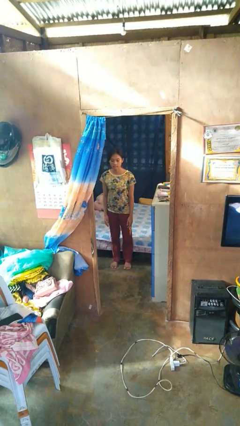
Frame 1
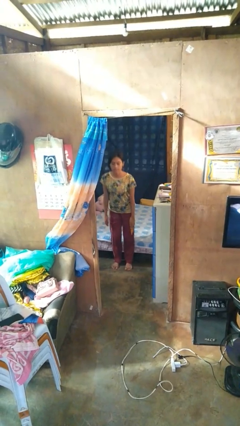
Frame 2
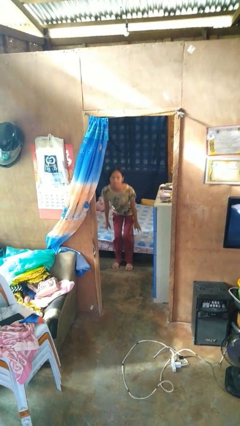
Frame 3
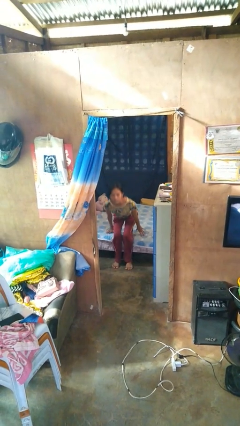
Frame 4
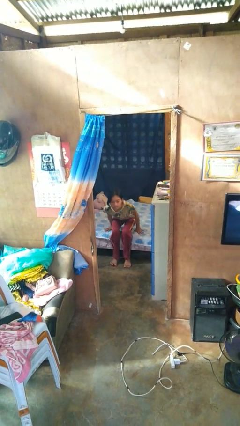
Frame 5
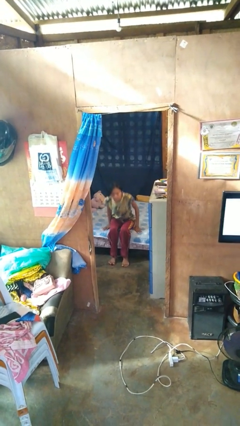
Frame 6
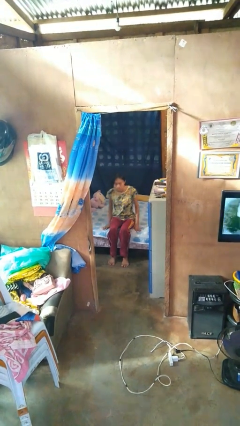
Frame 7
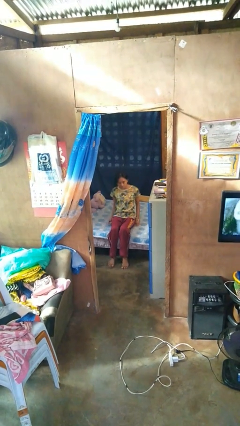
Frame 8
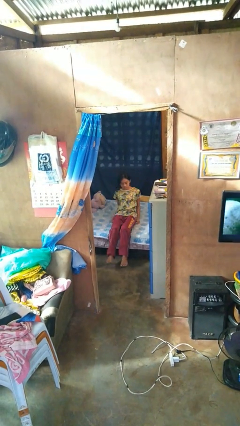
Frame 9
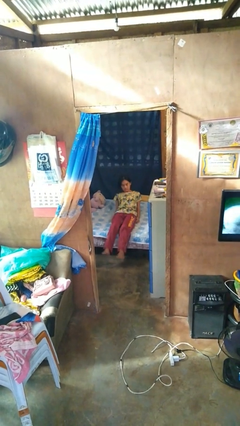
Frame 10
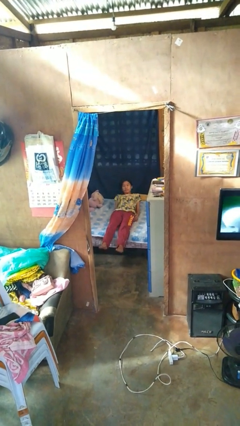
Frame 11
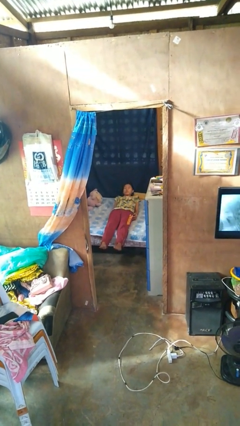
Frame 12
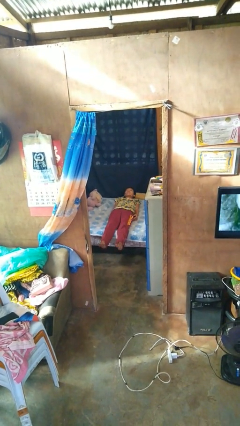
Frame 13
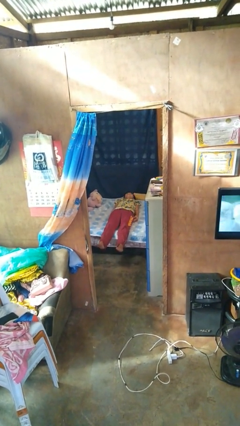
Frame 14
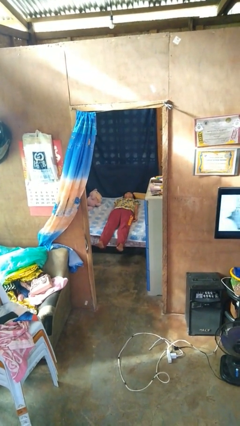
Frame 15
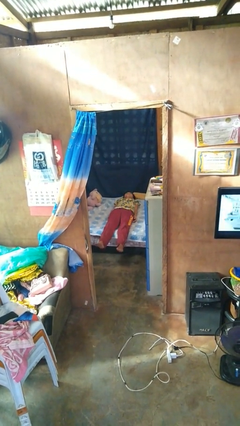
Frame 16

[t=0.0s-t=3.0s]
person lies down on bed

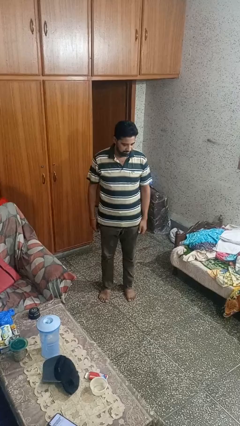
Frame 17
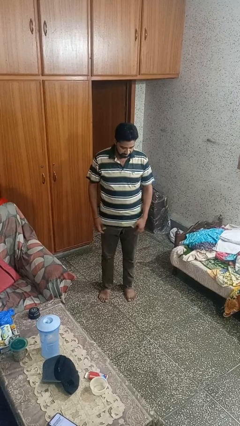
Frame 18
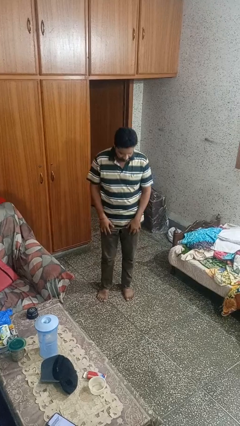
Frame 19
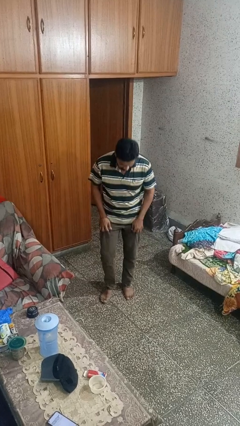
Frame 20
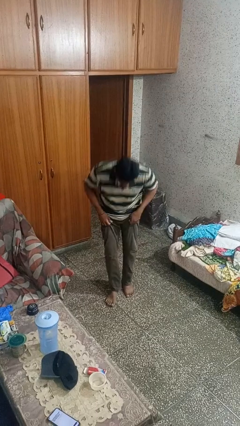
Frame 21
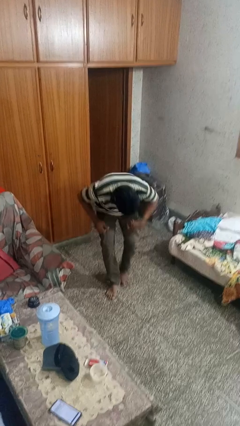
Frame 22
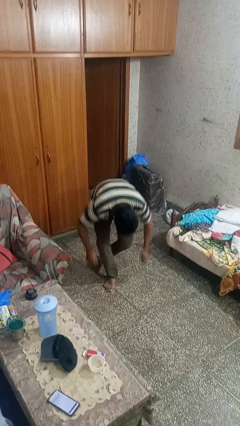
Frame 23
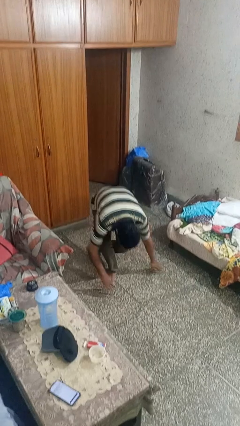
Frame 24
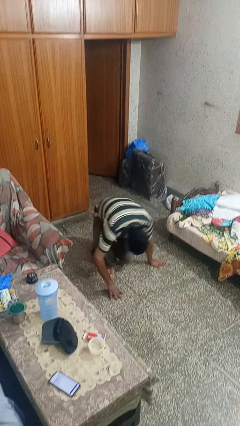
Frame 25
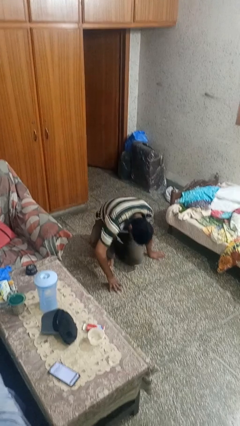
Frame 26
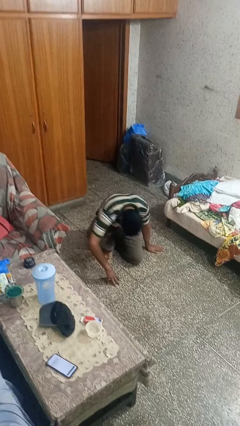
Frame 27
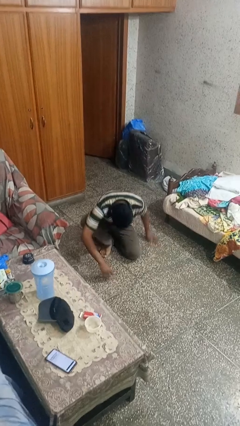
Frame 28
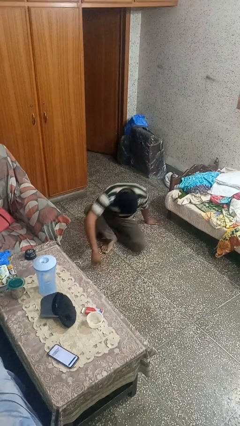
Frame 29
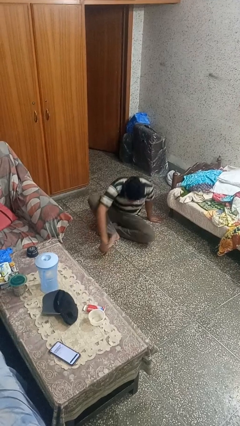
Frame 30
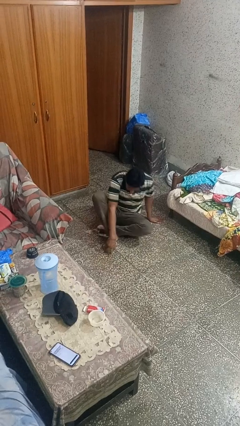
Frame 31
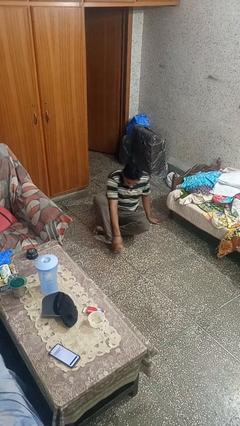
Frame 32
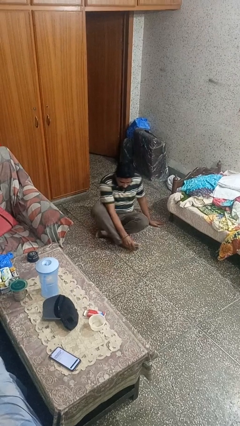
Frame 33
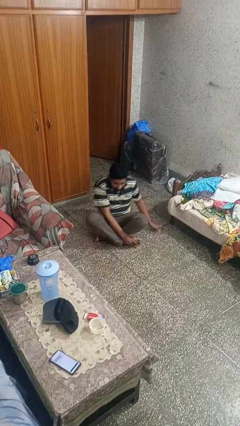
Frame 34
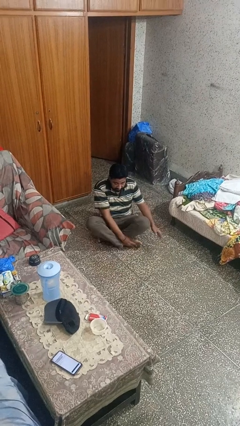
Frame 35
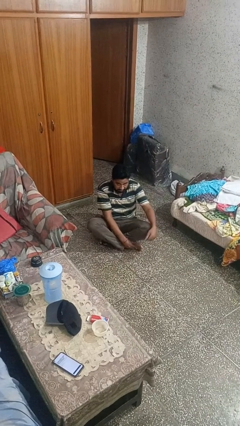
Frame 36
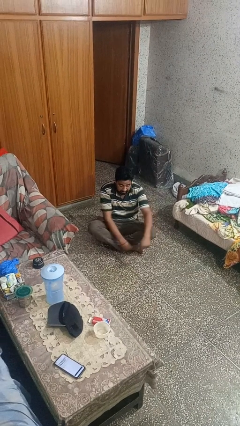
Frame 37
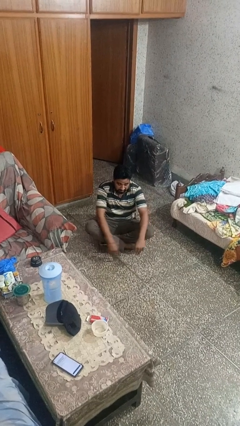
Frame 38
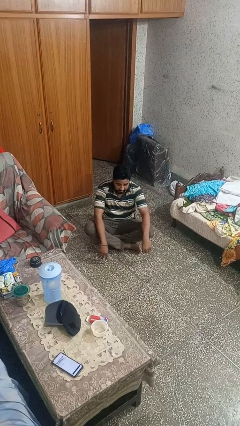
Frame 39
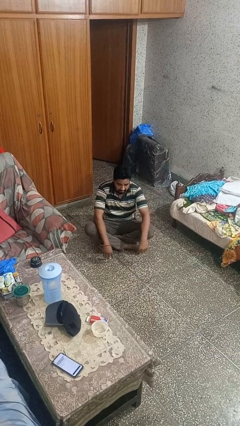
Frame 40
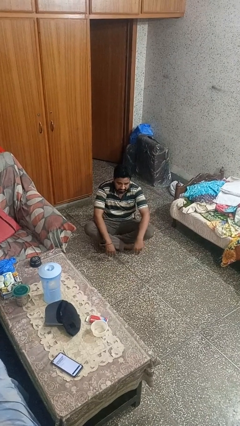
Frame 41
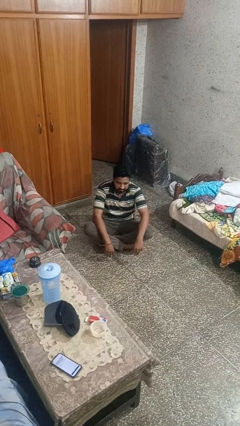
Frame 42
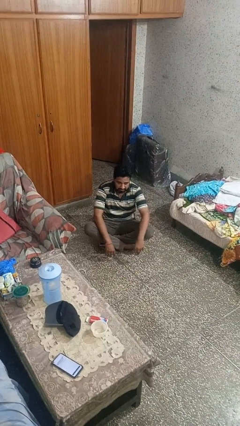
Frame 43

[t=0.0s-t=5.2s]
person sits crisscross

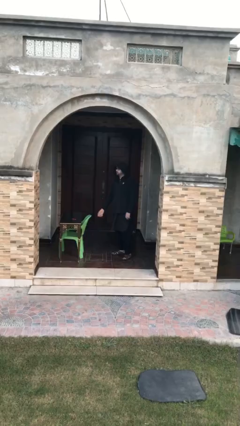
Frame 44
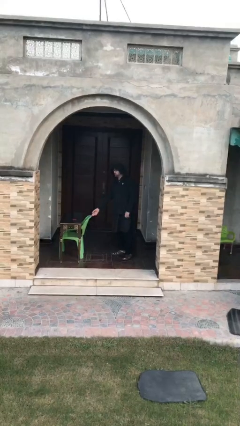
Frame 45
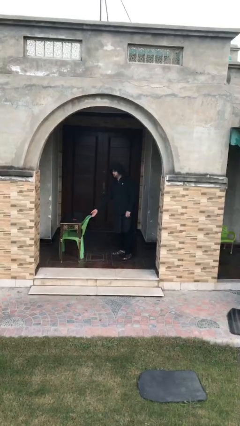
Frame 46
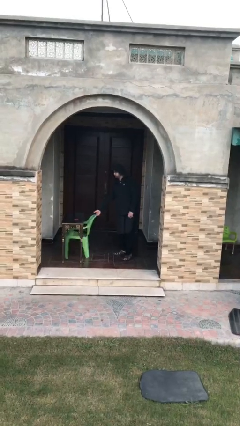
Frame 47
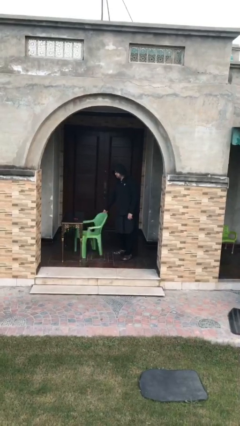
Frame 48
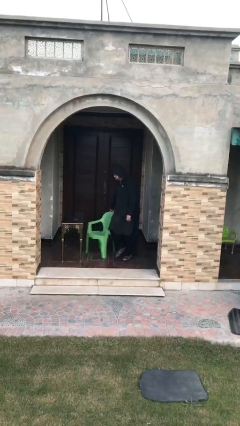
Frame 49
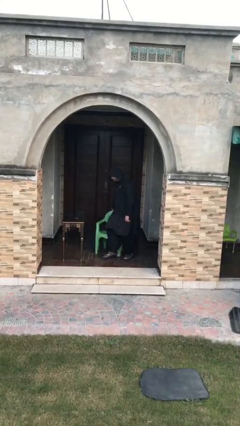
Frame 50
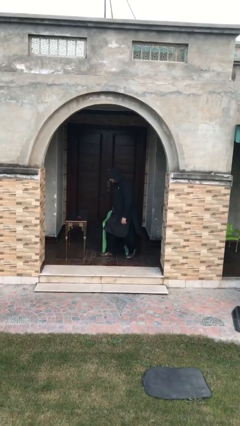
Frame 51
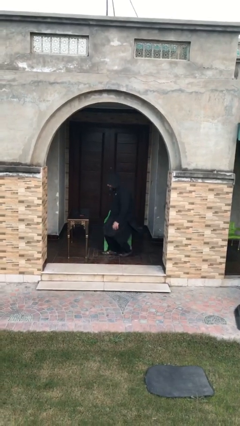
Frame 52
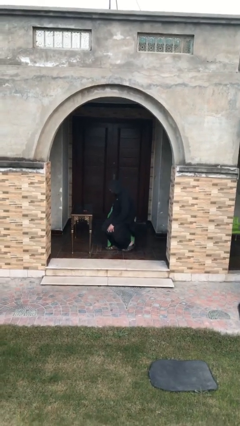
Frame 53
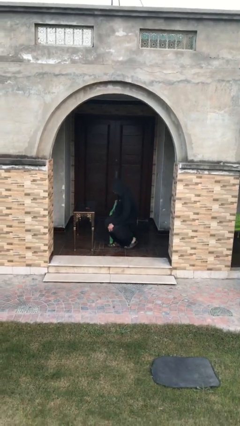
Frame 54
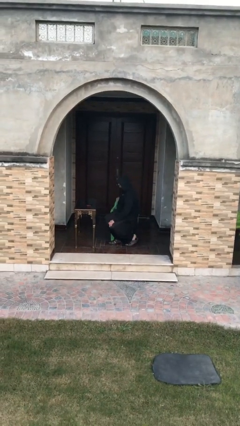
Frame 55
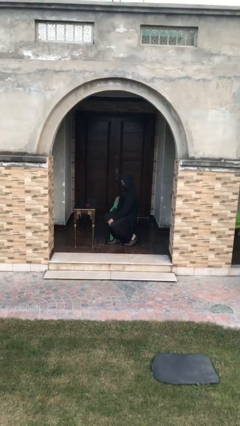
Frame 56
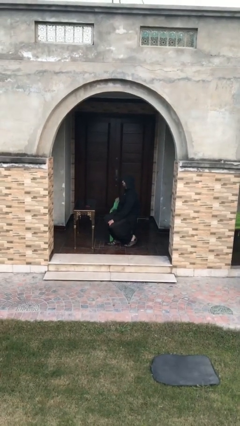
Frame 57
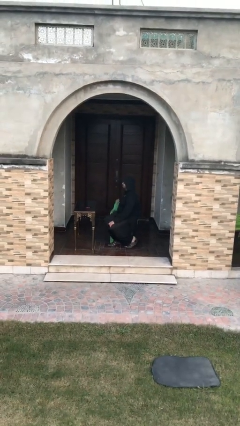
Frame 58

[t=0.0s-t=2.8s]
person sits down

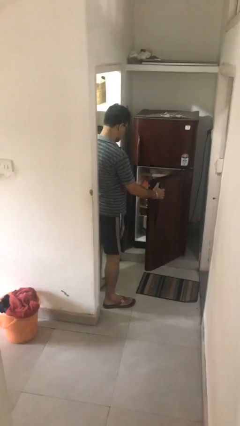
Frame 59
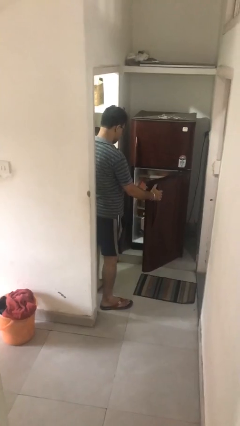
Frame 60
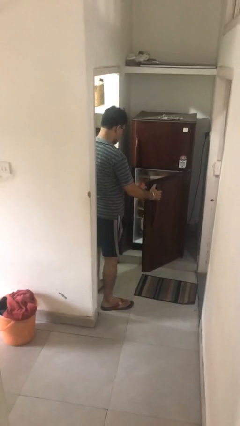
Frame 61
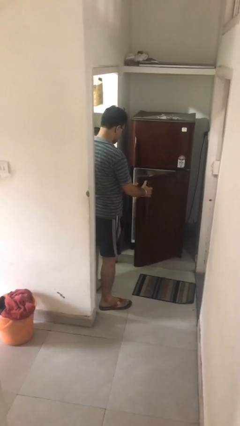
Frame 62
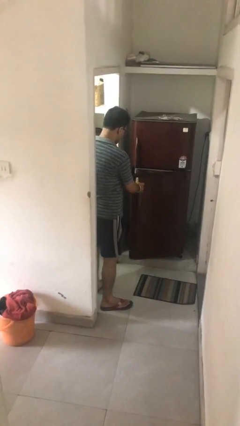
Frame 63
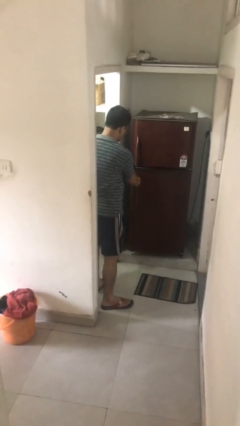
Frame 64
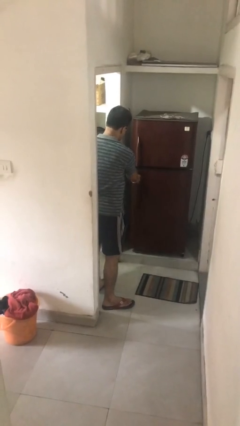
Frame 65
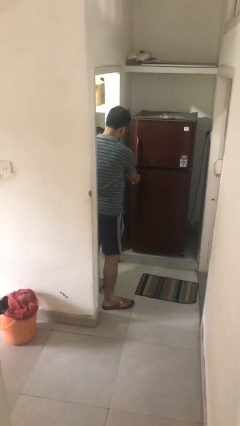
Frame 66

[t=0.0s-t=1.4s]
person closes refrigerator

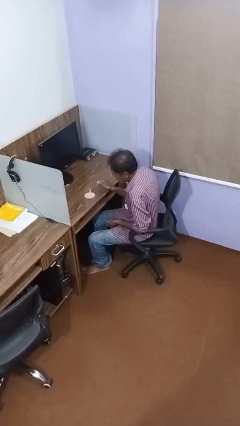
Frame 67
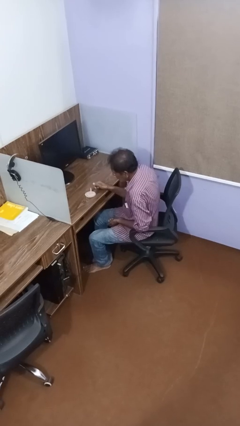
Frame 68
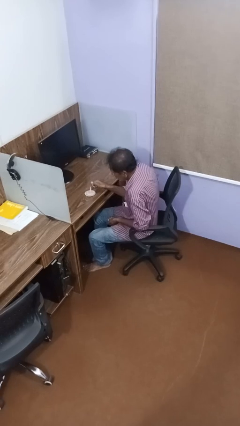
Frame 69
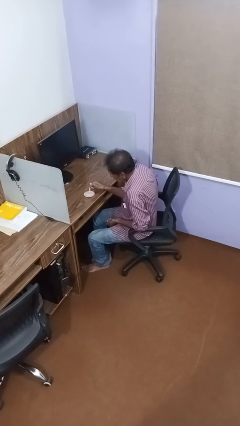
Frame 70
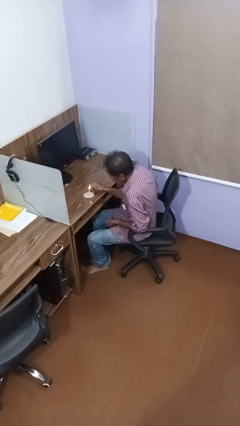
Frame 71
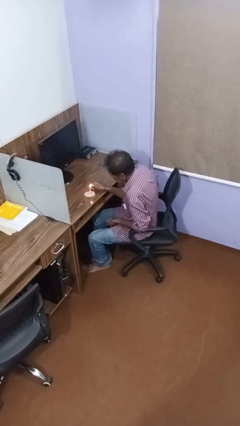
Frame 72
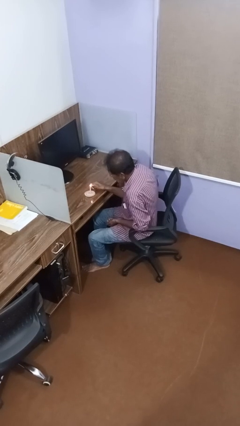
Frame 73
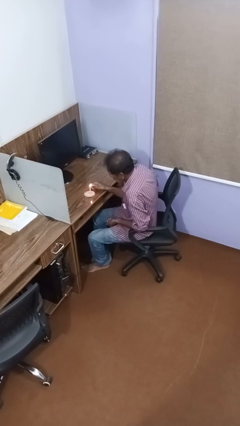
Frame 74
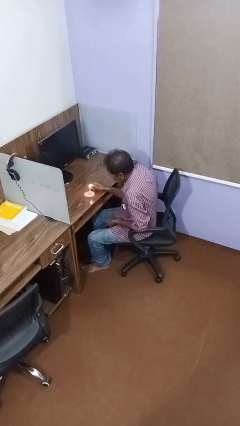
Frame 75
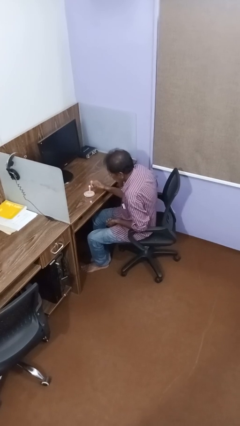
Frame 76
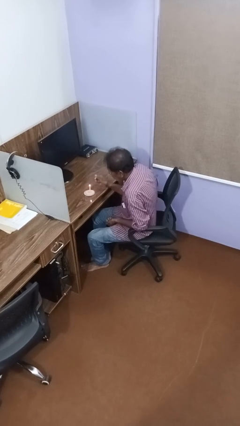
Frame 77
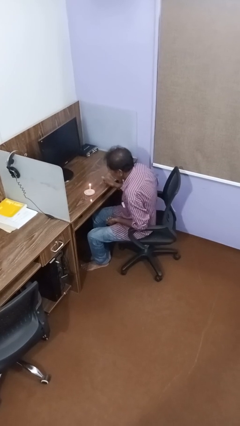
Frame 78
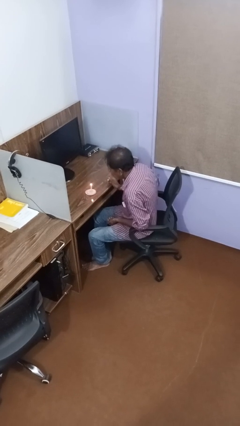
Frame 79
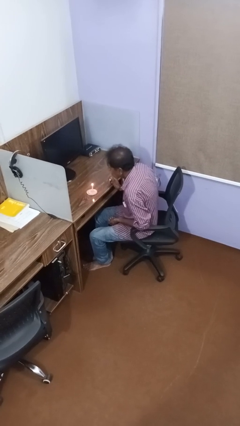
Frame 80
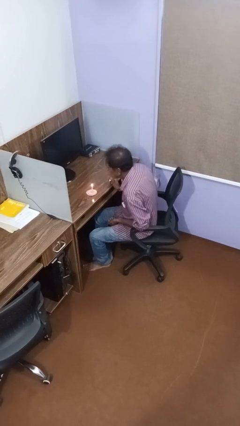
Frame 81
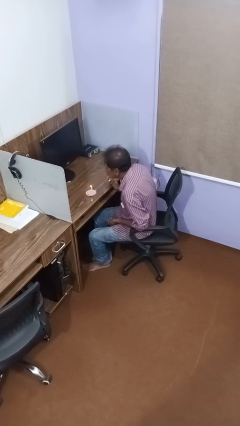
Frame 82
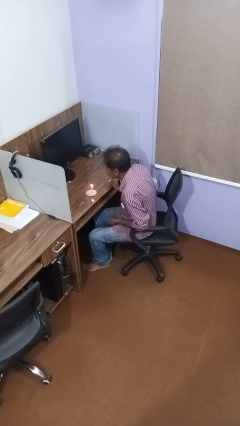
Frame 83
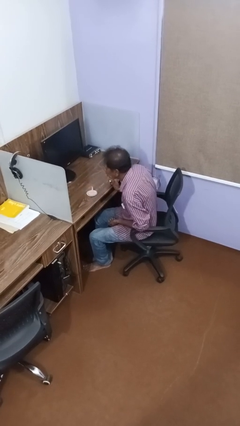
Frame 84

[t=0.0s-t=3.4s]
person lights candle

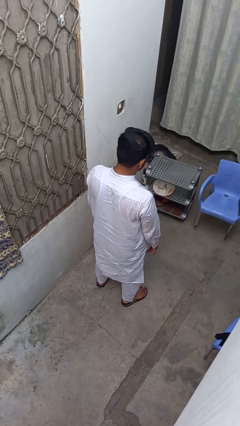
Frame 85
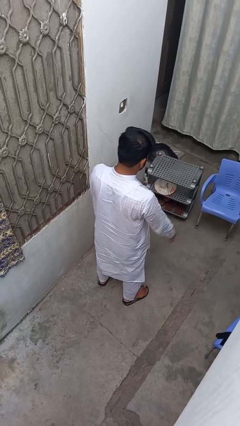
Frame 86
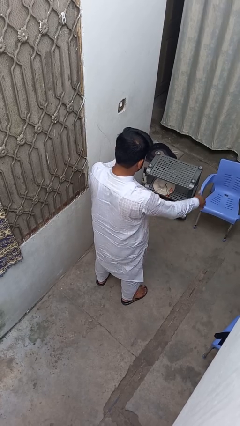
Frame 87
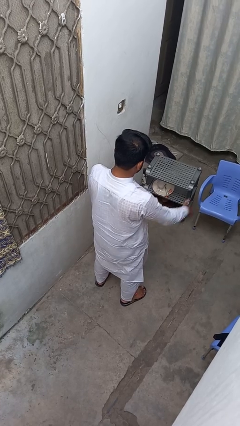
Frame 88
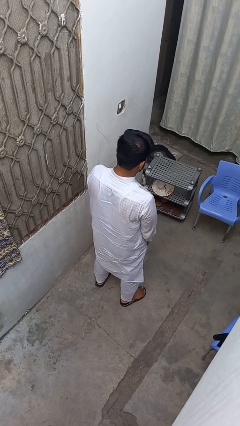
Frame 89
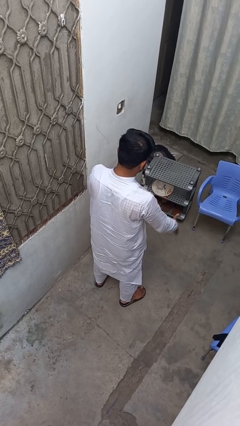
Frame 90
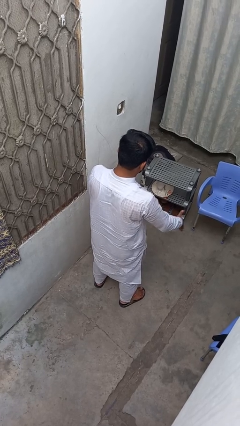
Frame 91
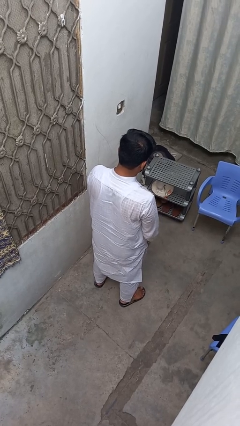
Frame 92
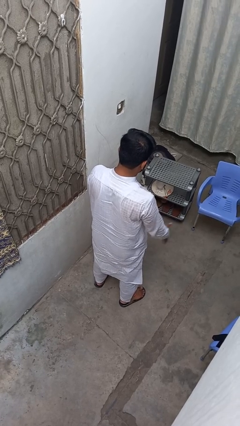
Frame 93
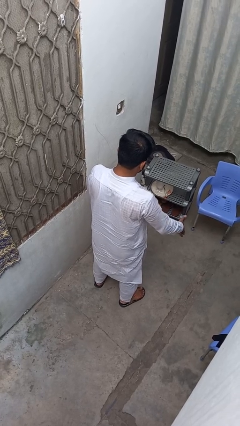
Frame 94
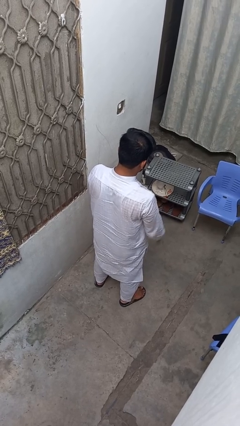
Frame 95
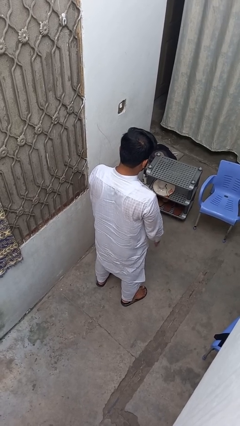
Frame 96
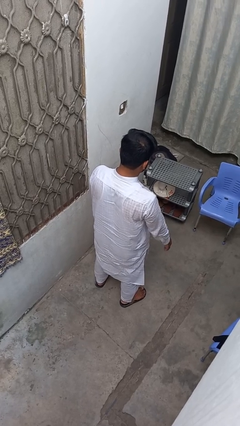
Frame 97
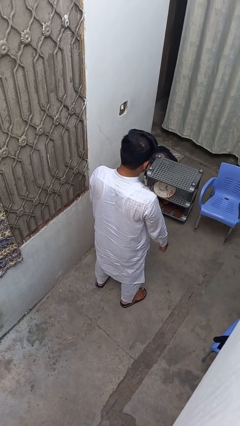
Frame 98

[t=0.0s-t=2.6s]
person slaps hands on thighs
